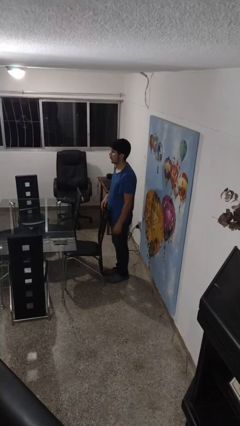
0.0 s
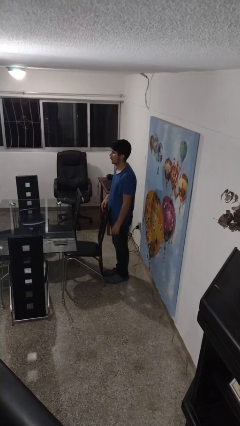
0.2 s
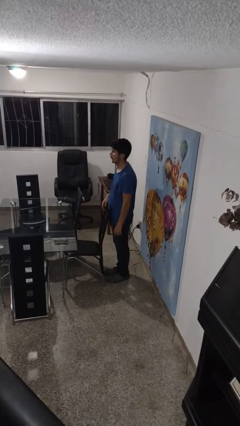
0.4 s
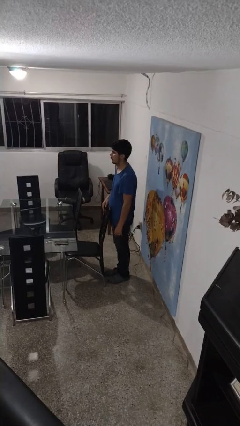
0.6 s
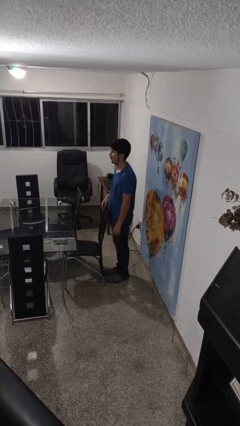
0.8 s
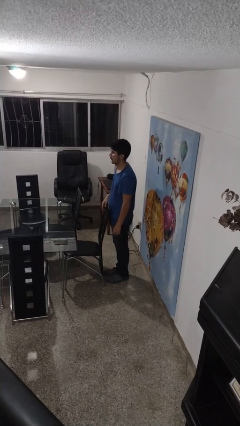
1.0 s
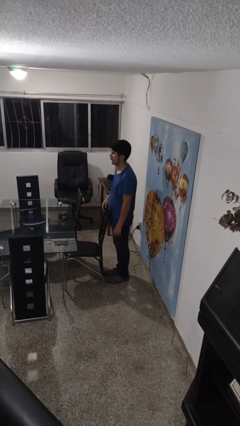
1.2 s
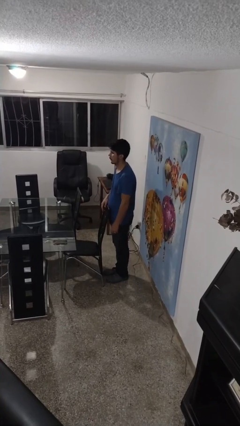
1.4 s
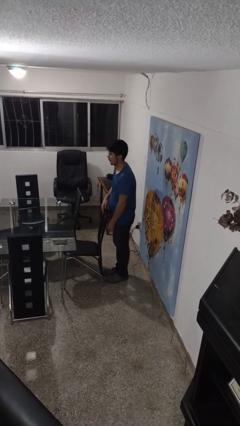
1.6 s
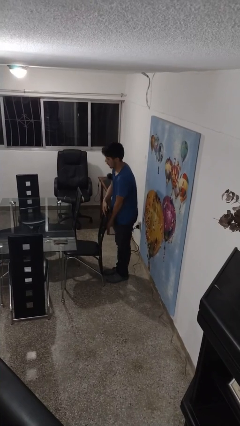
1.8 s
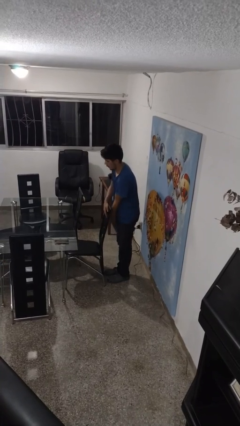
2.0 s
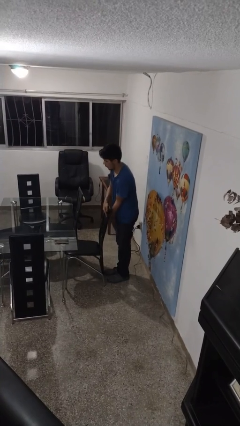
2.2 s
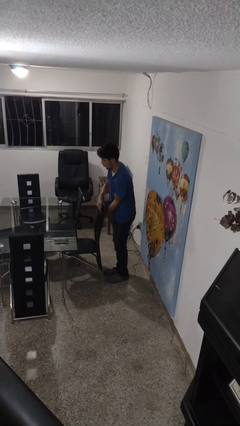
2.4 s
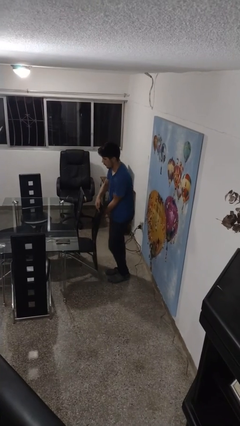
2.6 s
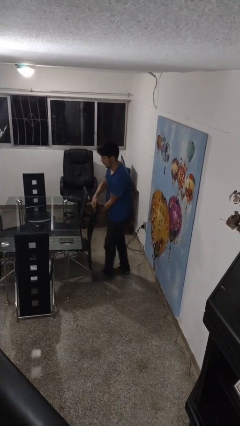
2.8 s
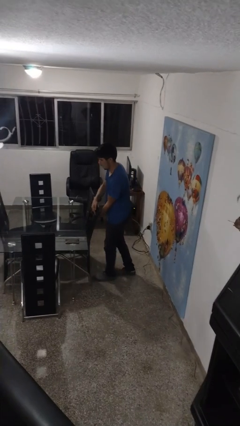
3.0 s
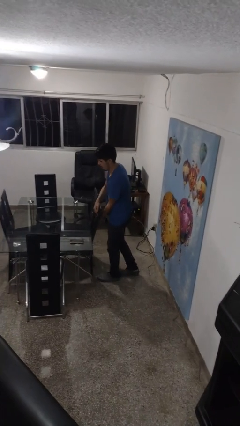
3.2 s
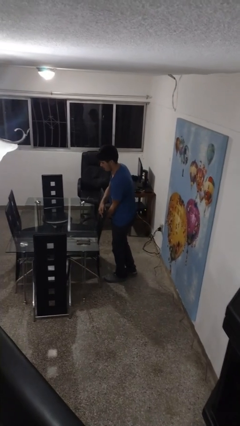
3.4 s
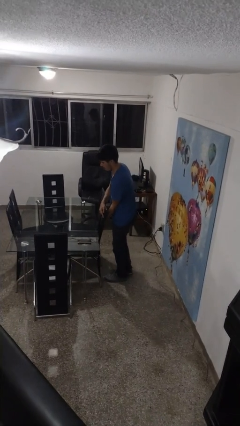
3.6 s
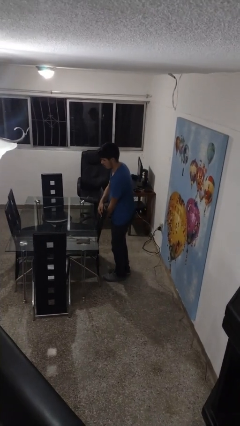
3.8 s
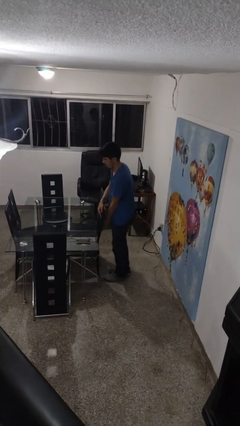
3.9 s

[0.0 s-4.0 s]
person pushes in chair

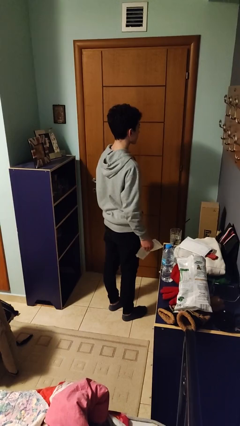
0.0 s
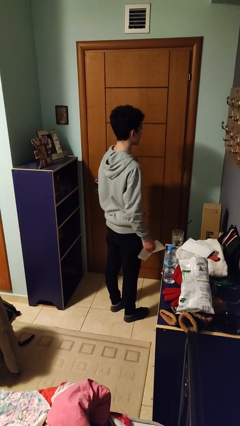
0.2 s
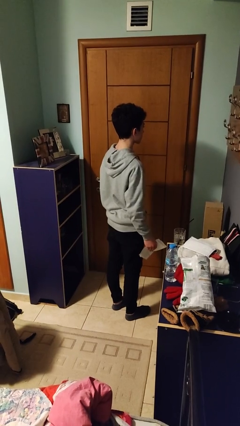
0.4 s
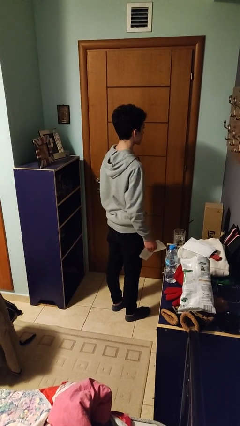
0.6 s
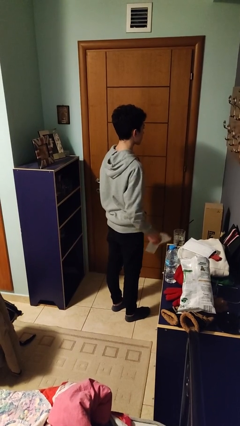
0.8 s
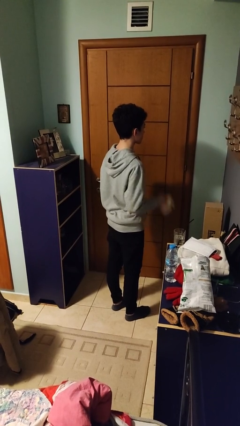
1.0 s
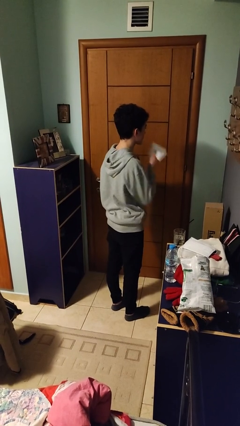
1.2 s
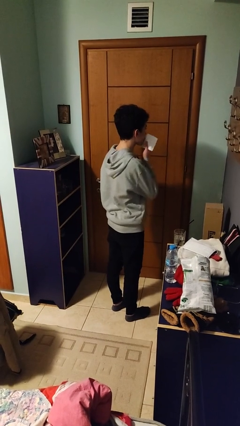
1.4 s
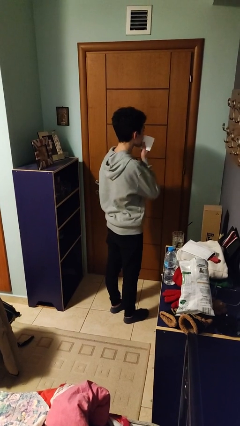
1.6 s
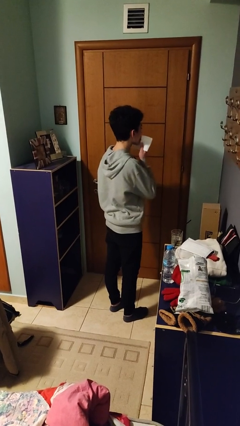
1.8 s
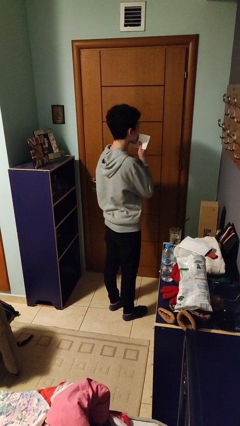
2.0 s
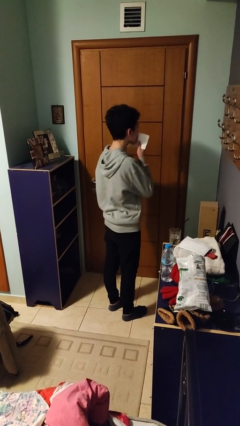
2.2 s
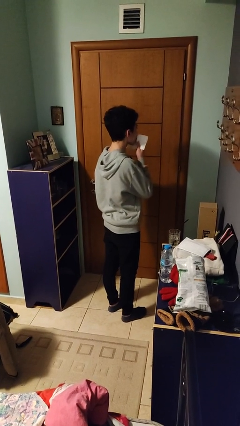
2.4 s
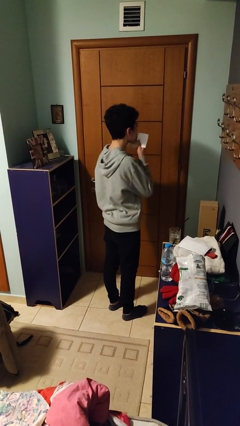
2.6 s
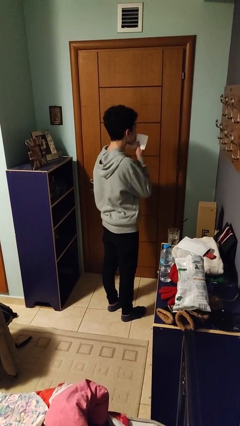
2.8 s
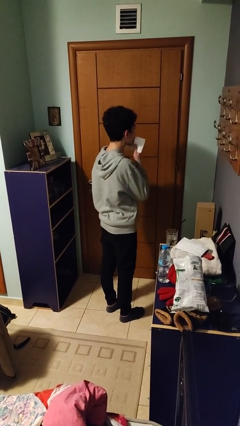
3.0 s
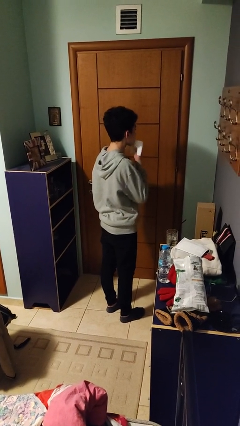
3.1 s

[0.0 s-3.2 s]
person wipes mouth with napkin

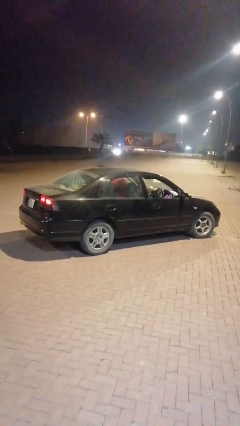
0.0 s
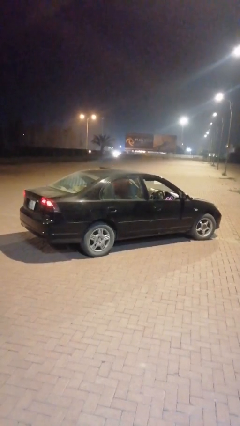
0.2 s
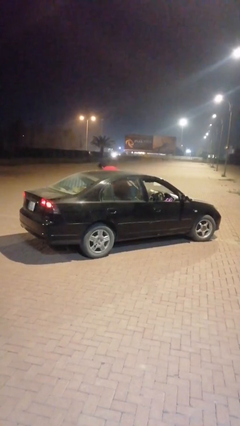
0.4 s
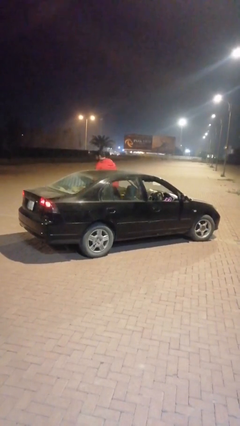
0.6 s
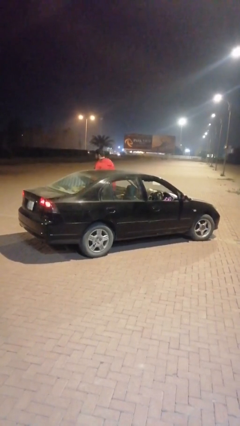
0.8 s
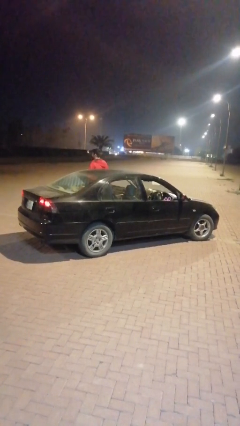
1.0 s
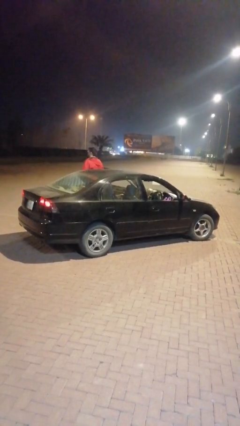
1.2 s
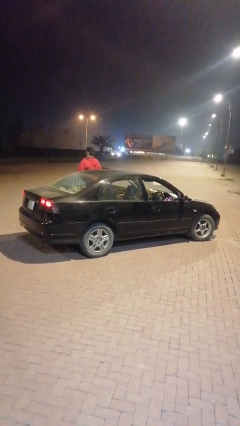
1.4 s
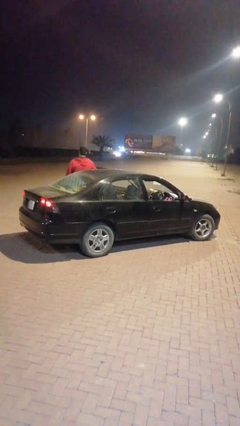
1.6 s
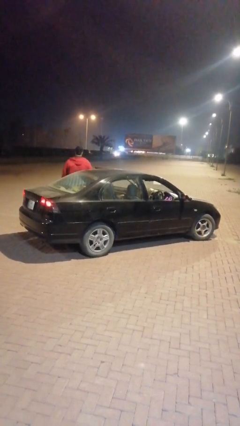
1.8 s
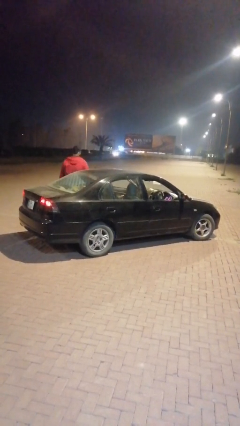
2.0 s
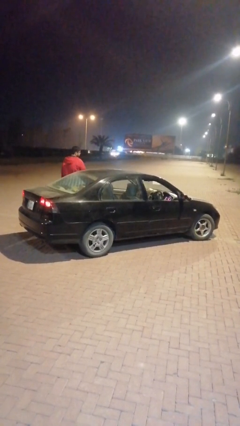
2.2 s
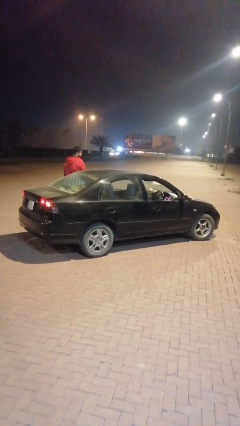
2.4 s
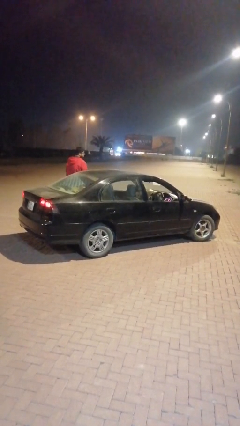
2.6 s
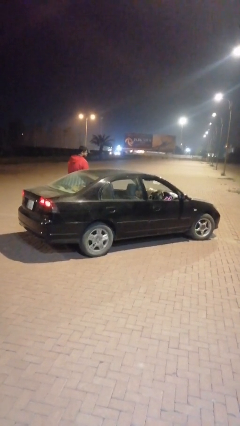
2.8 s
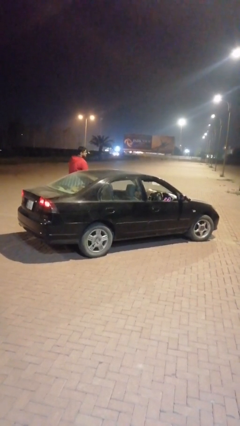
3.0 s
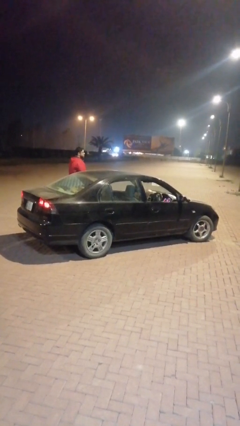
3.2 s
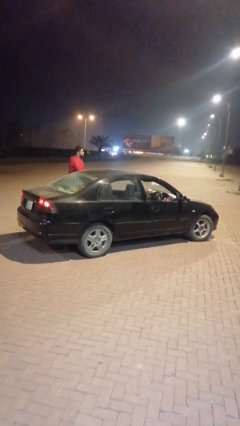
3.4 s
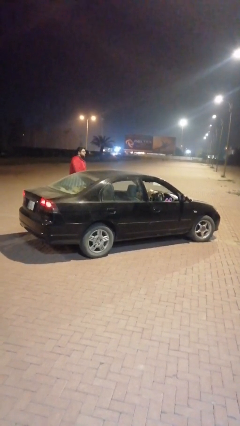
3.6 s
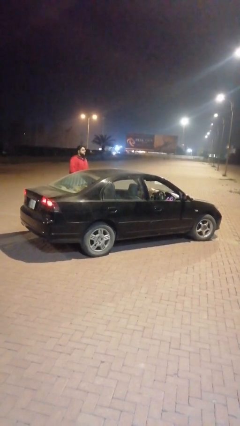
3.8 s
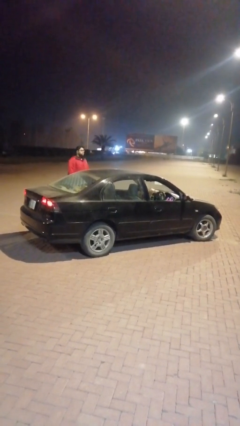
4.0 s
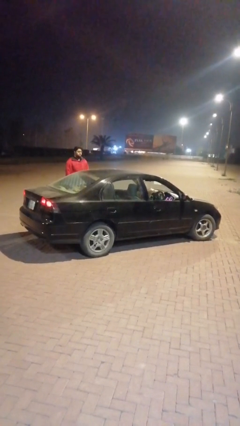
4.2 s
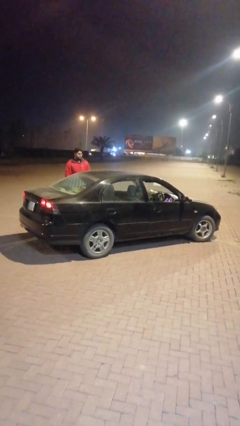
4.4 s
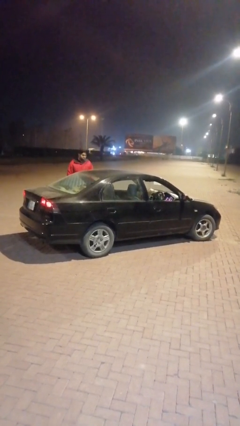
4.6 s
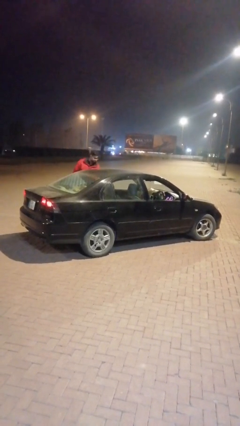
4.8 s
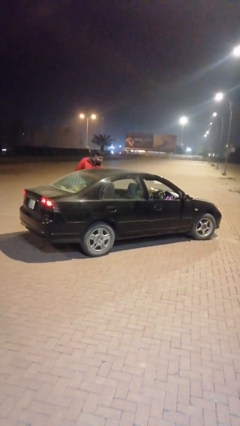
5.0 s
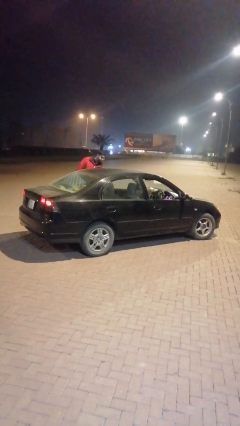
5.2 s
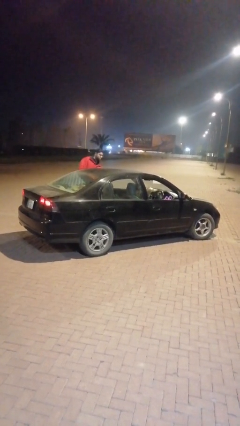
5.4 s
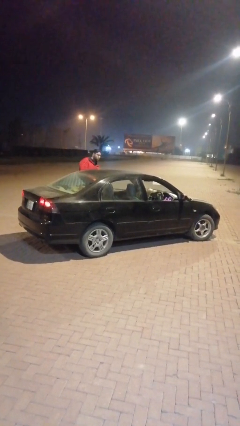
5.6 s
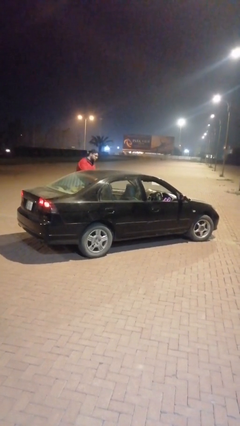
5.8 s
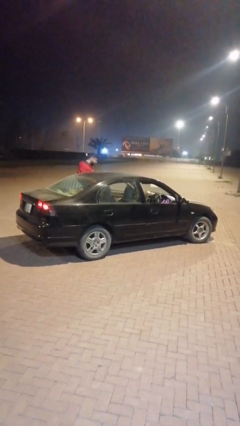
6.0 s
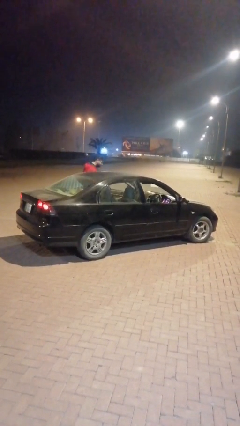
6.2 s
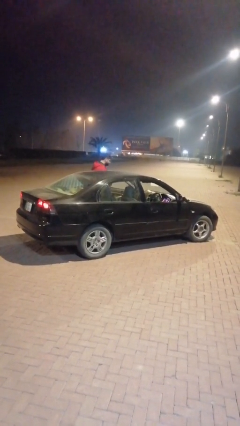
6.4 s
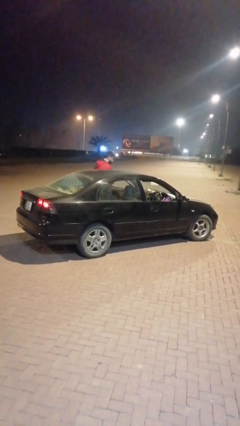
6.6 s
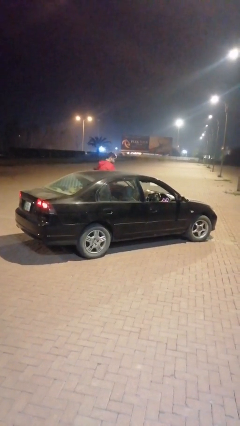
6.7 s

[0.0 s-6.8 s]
car drops off person

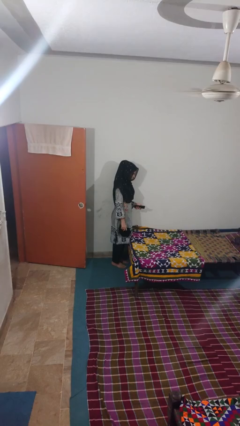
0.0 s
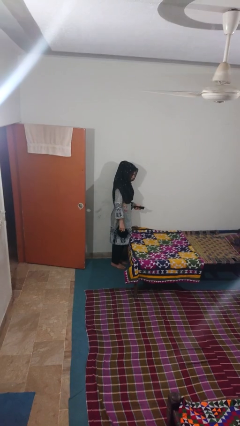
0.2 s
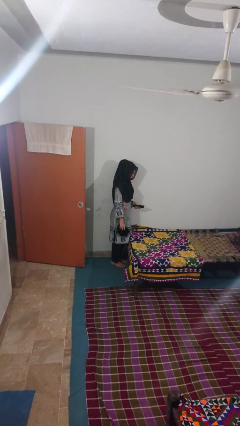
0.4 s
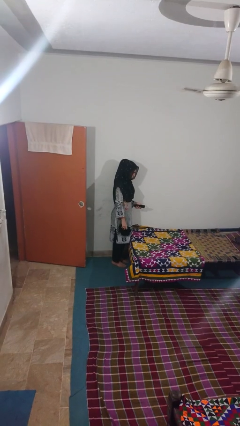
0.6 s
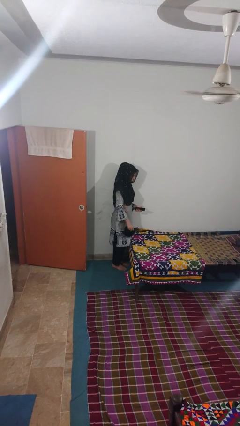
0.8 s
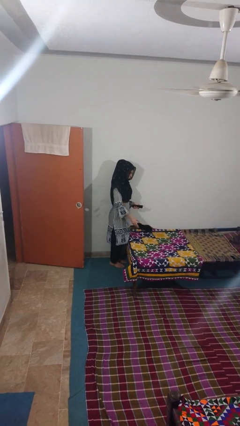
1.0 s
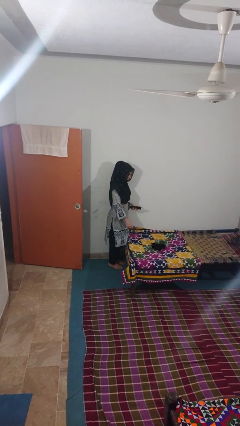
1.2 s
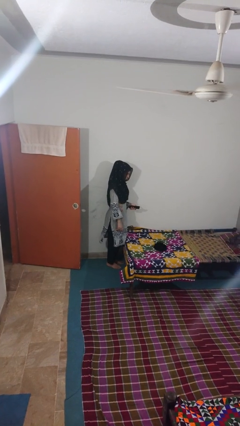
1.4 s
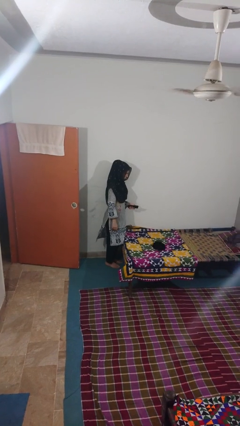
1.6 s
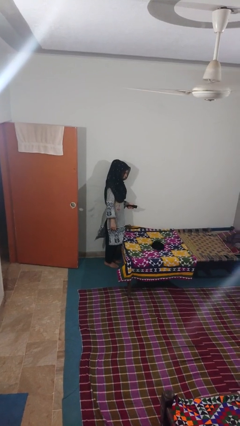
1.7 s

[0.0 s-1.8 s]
person throws object on bed

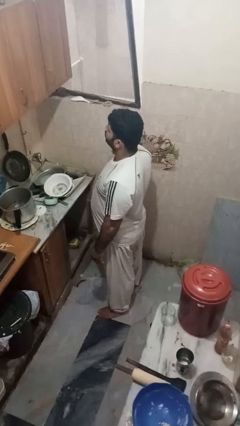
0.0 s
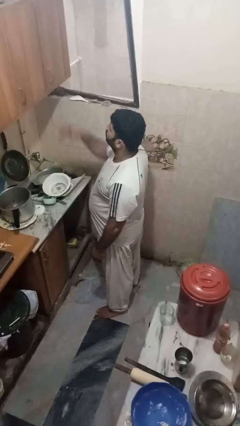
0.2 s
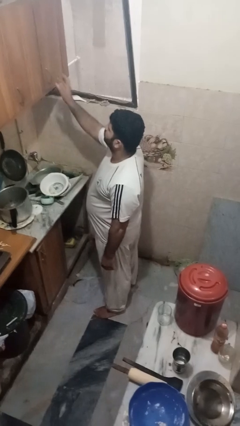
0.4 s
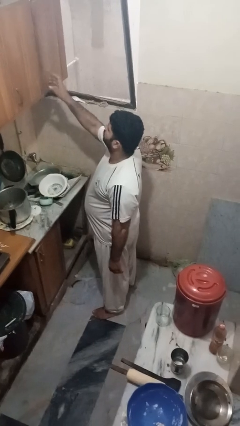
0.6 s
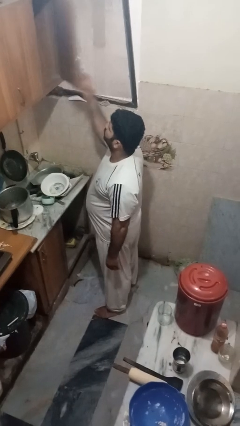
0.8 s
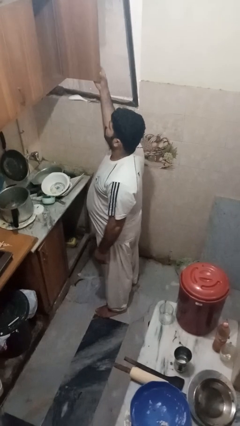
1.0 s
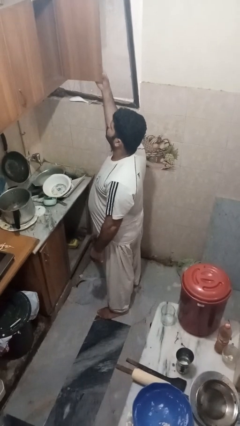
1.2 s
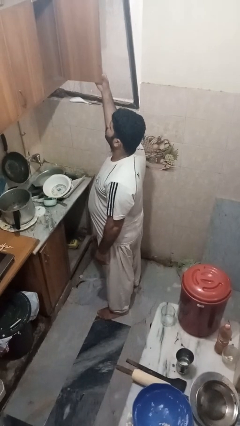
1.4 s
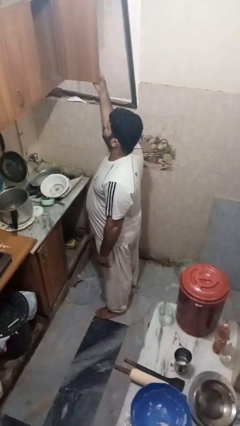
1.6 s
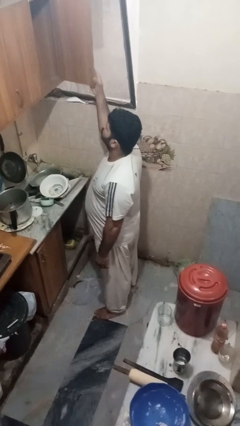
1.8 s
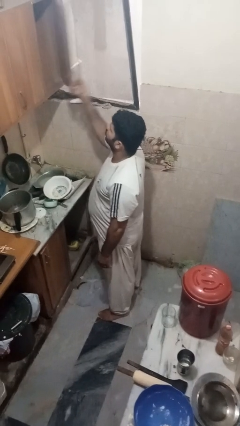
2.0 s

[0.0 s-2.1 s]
person opens cabinet

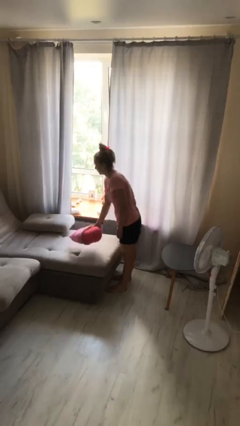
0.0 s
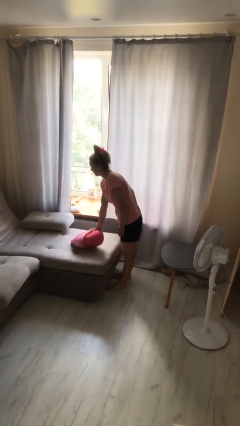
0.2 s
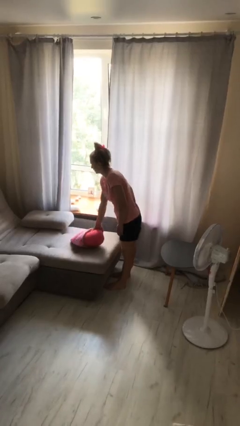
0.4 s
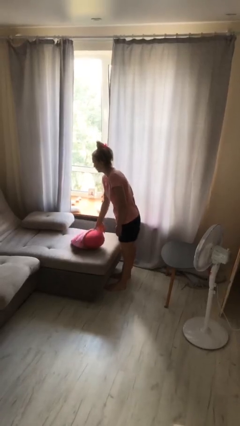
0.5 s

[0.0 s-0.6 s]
person puts down object on couch
